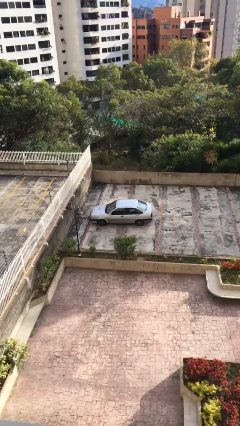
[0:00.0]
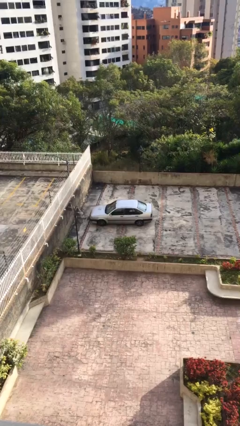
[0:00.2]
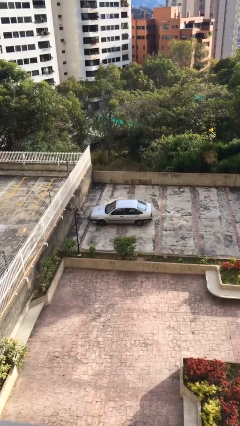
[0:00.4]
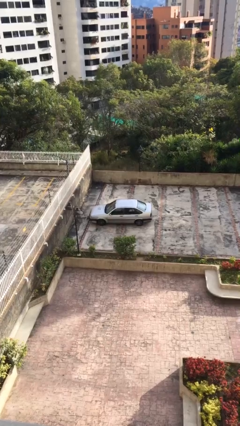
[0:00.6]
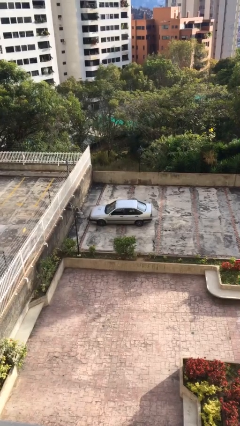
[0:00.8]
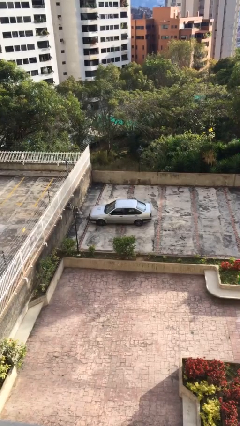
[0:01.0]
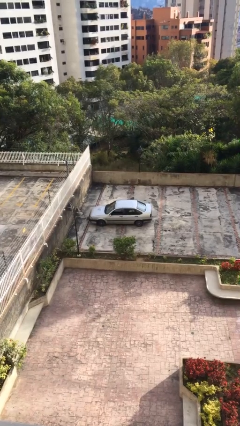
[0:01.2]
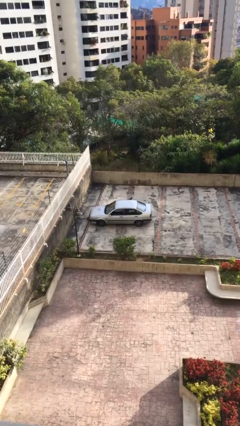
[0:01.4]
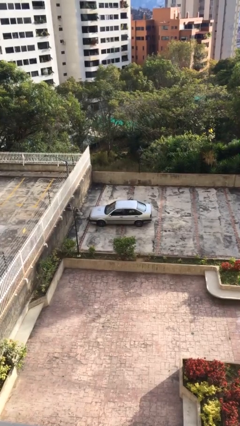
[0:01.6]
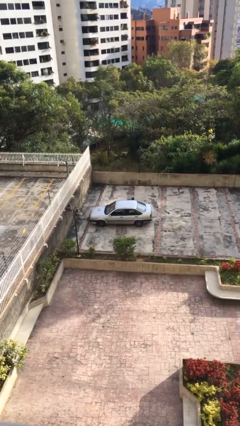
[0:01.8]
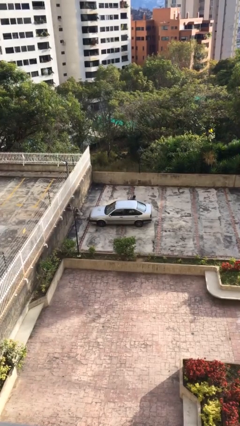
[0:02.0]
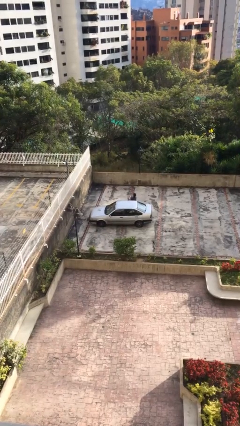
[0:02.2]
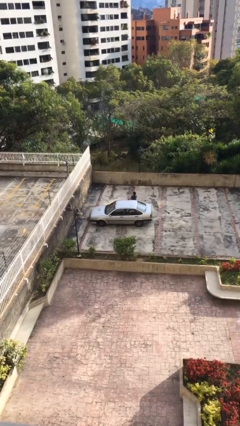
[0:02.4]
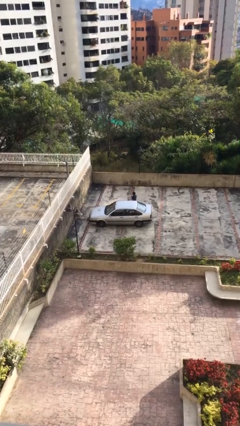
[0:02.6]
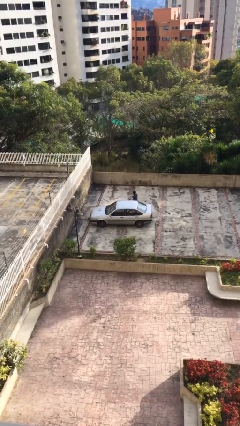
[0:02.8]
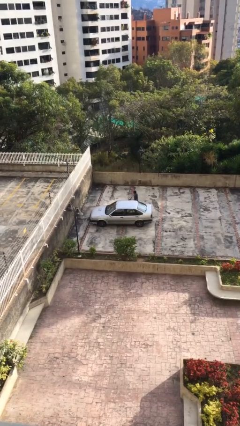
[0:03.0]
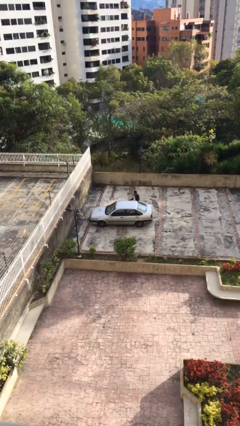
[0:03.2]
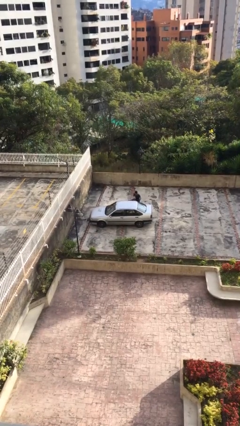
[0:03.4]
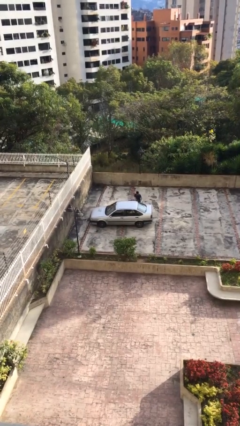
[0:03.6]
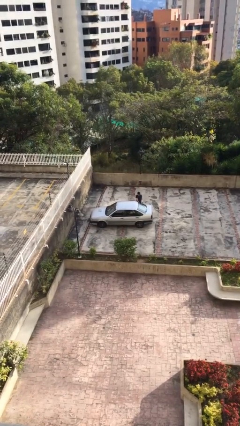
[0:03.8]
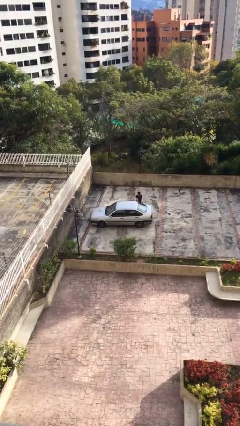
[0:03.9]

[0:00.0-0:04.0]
car drops off person

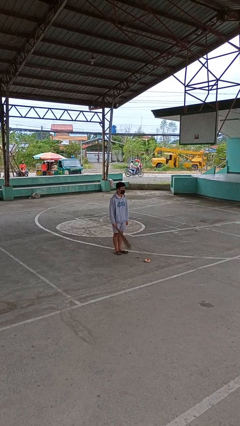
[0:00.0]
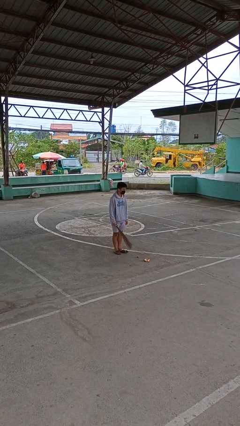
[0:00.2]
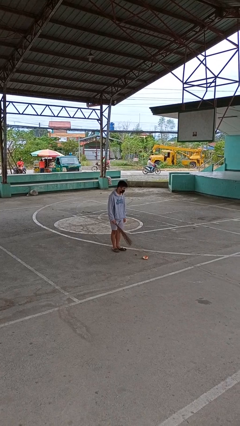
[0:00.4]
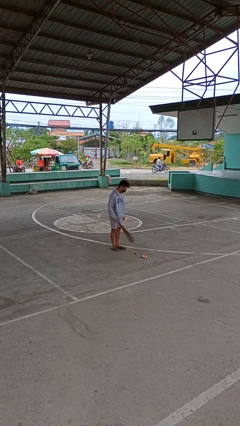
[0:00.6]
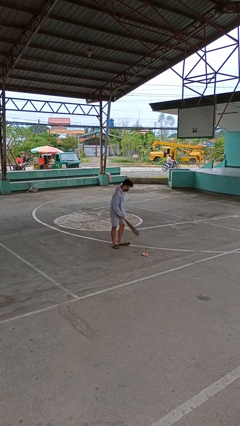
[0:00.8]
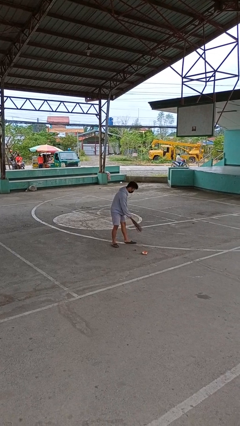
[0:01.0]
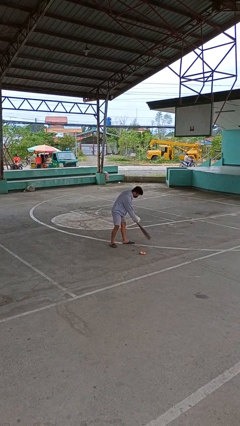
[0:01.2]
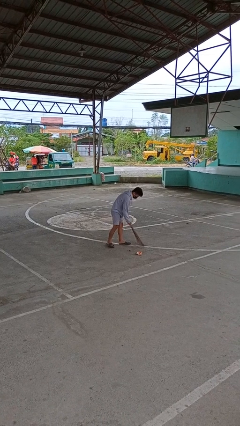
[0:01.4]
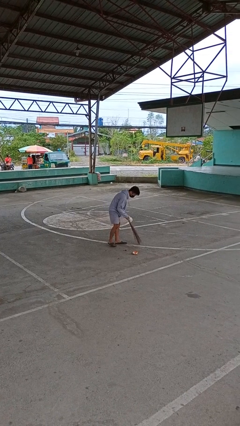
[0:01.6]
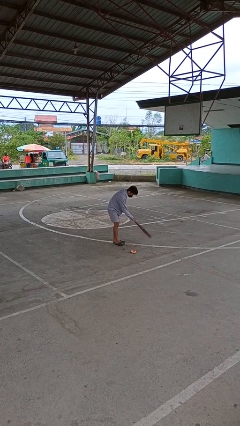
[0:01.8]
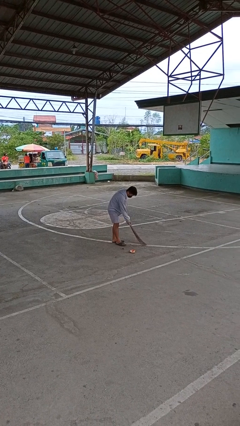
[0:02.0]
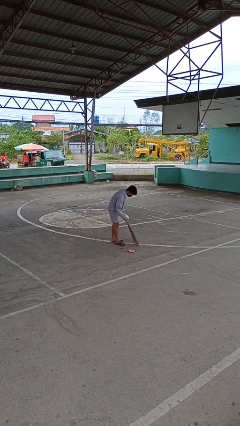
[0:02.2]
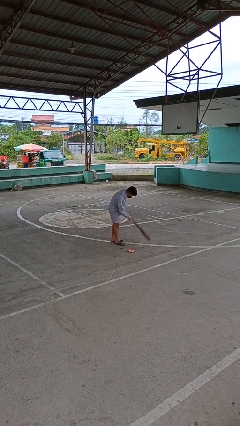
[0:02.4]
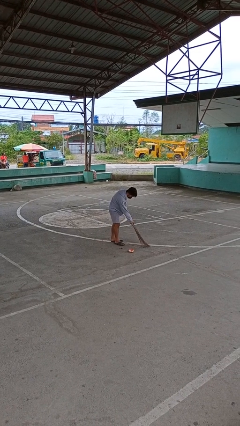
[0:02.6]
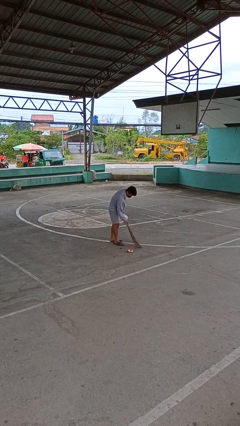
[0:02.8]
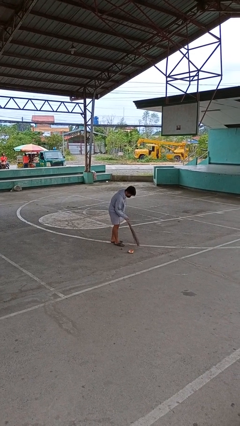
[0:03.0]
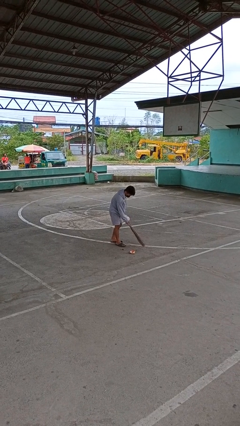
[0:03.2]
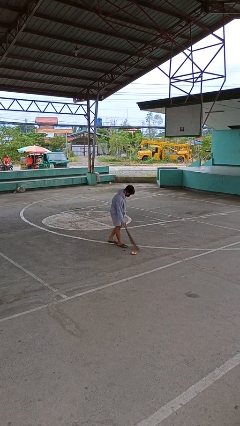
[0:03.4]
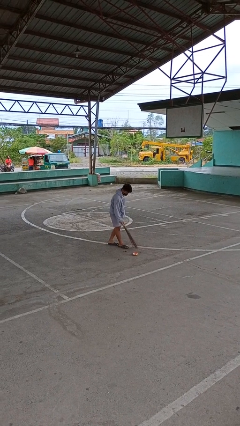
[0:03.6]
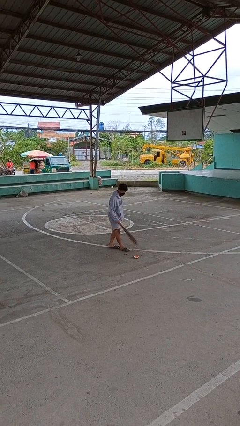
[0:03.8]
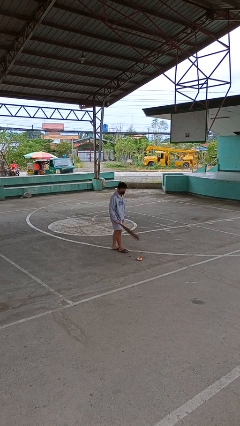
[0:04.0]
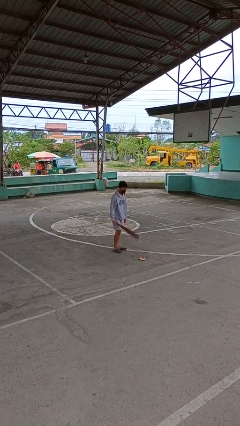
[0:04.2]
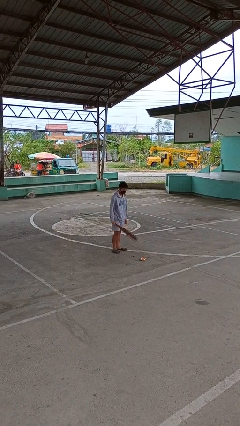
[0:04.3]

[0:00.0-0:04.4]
person sweeps floor

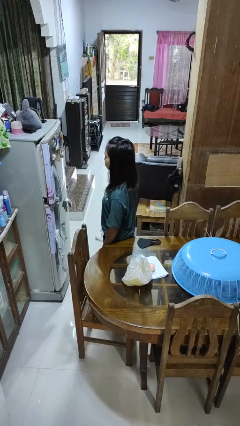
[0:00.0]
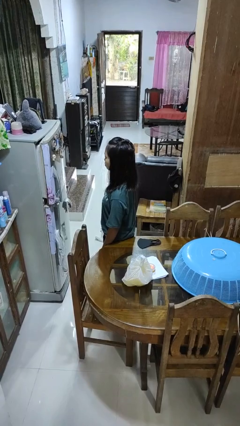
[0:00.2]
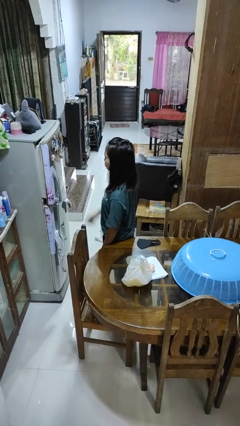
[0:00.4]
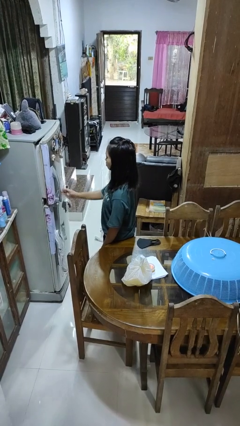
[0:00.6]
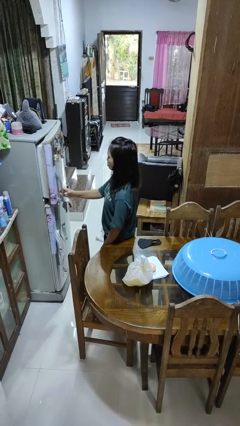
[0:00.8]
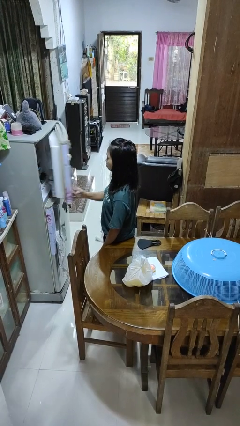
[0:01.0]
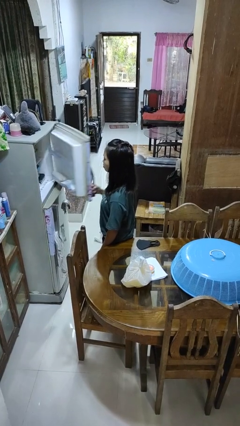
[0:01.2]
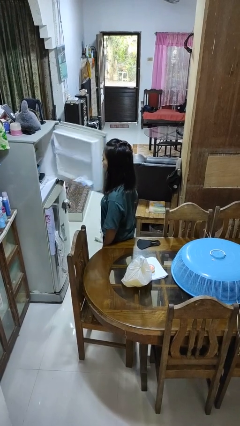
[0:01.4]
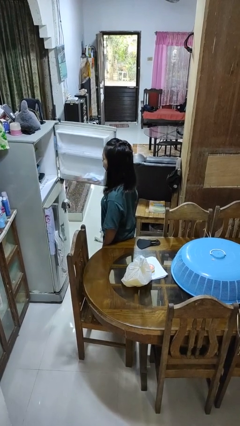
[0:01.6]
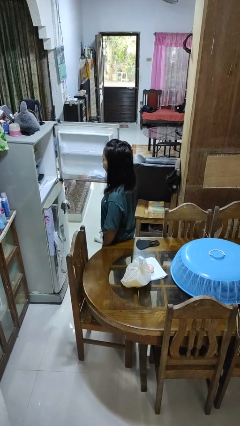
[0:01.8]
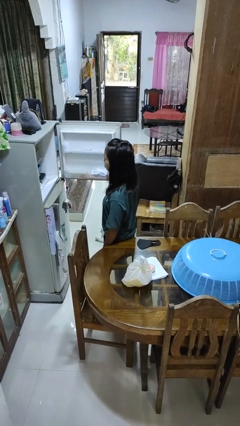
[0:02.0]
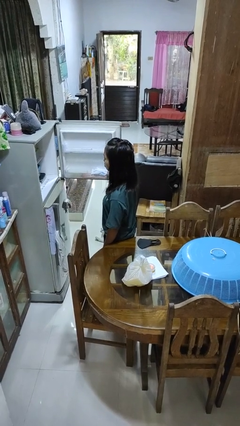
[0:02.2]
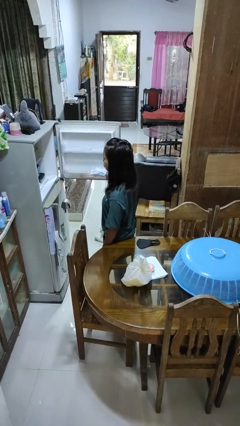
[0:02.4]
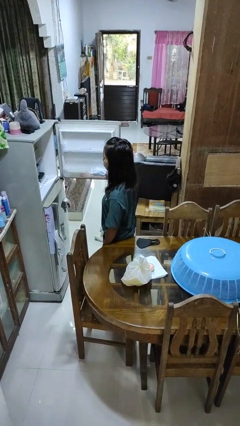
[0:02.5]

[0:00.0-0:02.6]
person opens refrigerator

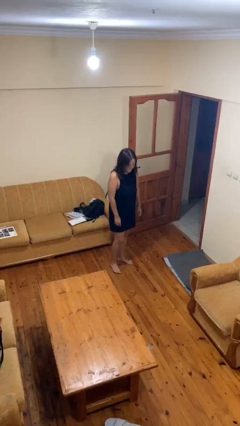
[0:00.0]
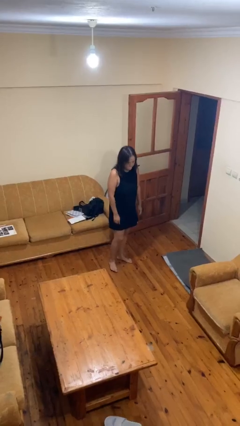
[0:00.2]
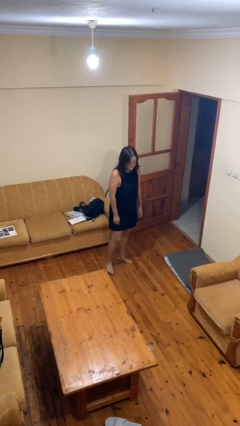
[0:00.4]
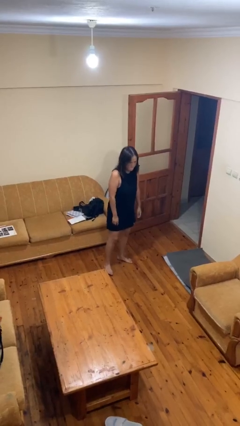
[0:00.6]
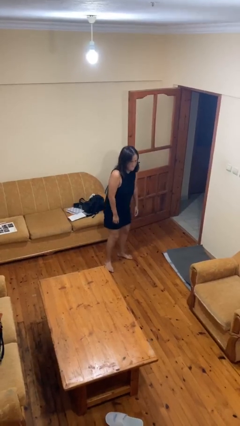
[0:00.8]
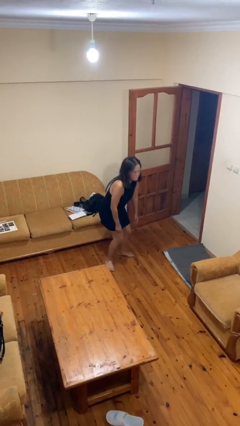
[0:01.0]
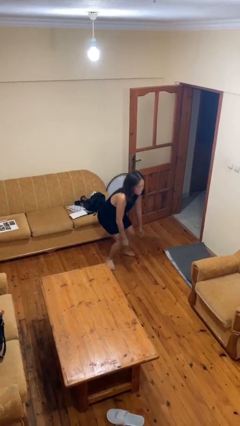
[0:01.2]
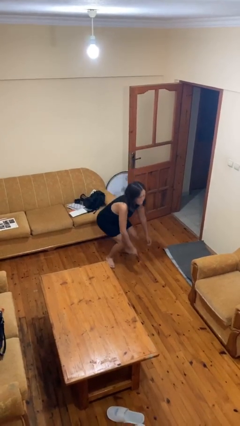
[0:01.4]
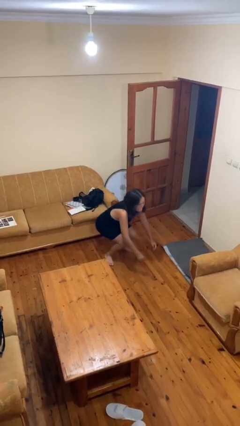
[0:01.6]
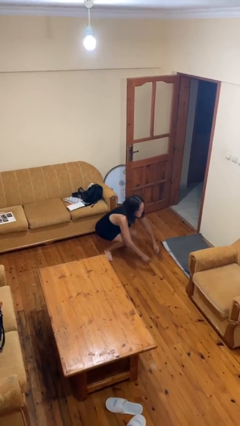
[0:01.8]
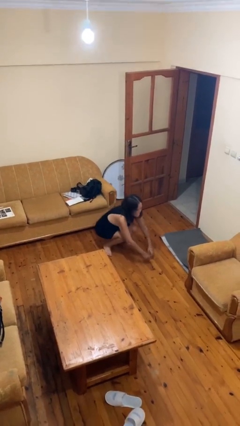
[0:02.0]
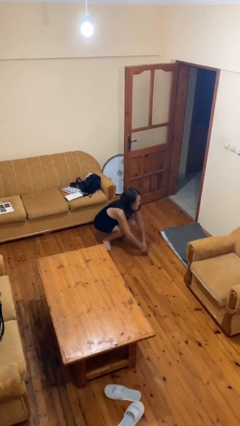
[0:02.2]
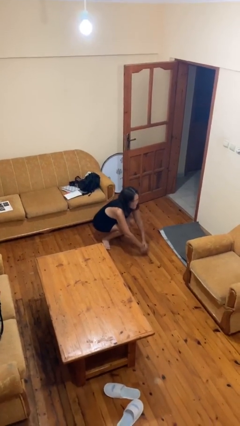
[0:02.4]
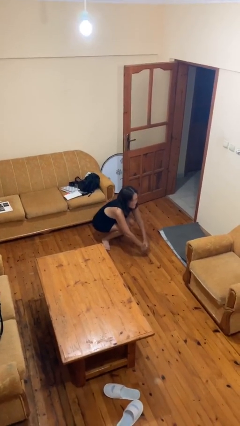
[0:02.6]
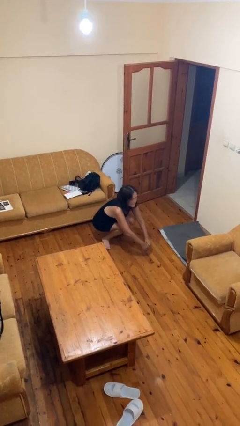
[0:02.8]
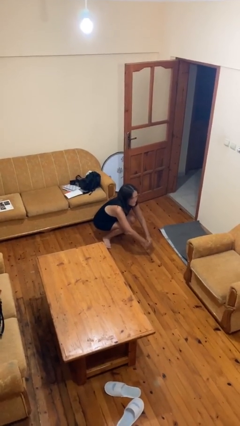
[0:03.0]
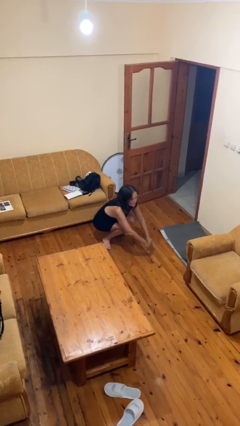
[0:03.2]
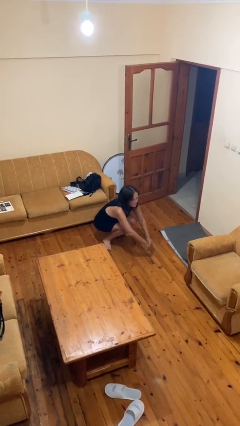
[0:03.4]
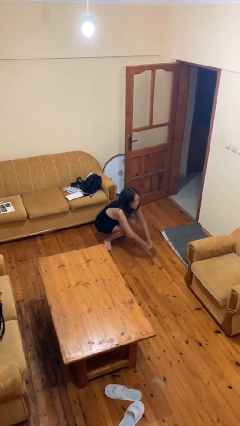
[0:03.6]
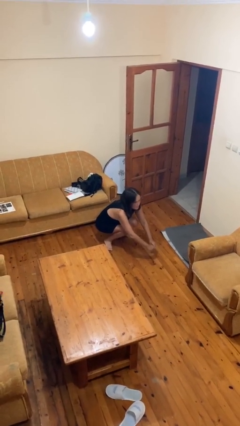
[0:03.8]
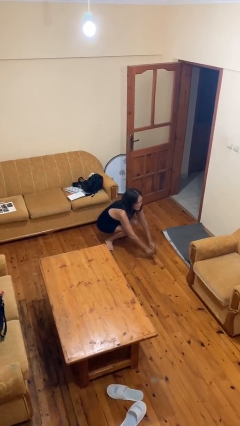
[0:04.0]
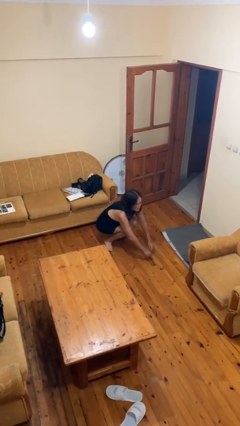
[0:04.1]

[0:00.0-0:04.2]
person squats

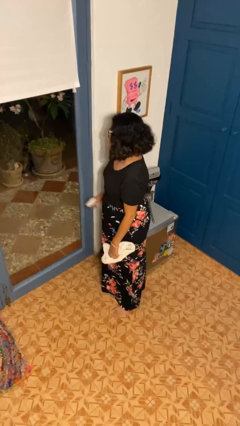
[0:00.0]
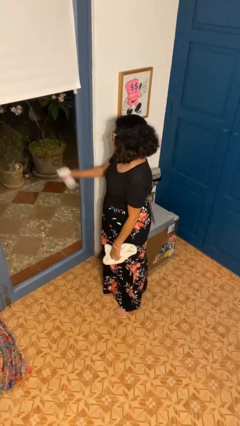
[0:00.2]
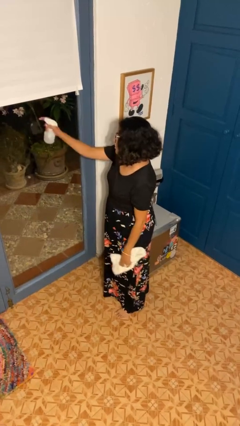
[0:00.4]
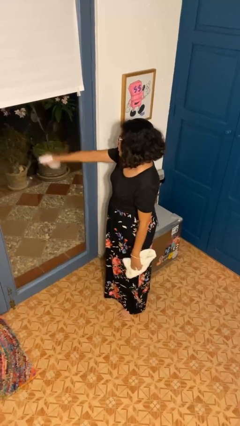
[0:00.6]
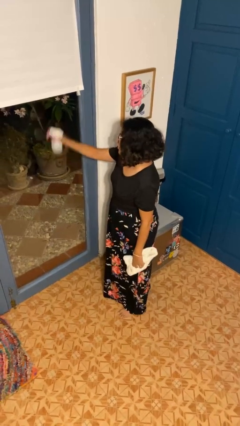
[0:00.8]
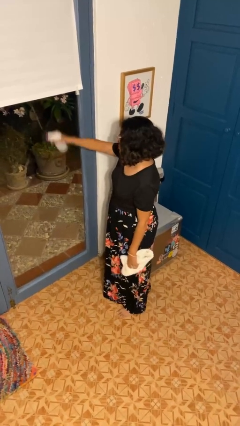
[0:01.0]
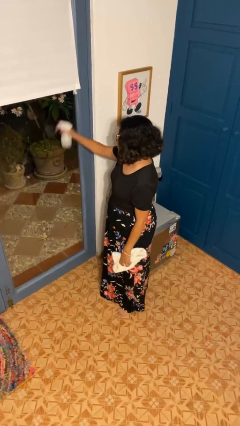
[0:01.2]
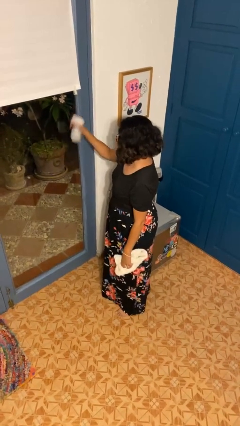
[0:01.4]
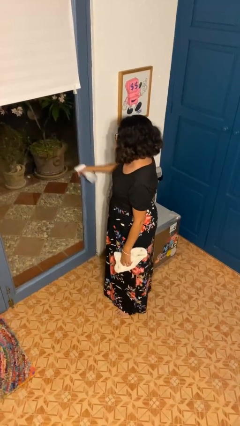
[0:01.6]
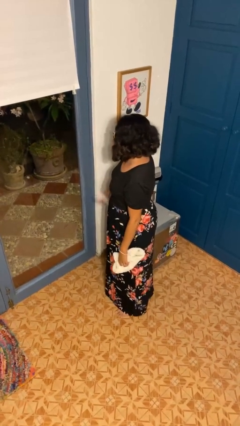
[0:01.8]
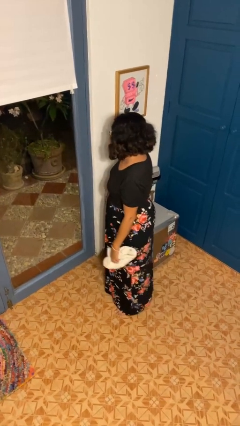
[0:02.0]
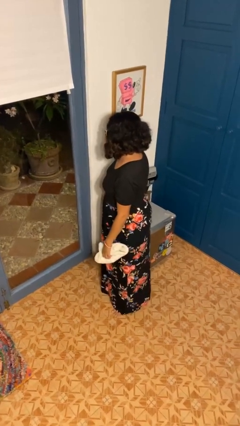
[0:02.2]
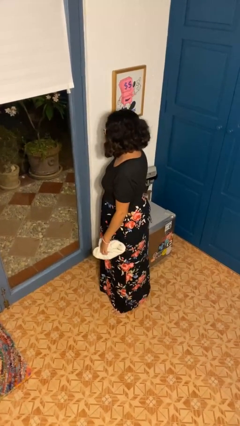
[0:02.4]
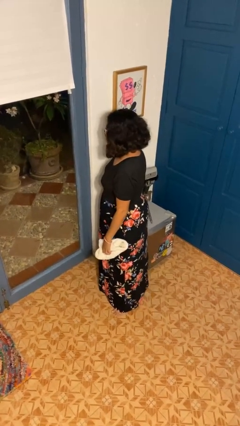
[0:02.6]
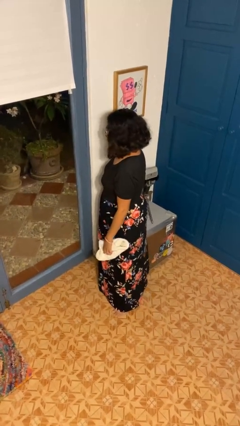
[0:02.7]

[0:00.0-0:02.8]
person sprays from bottle
